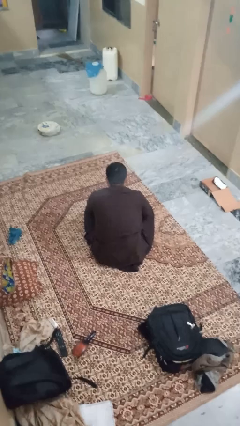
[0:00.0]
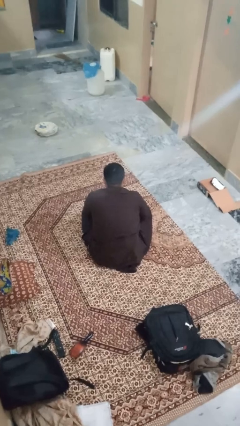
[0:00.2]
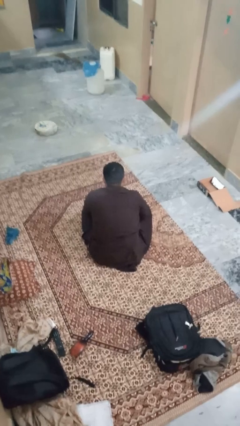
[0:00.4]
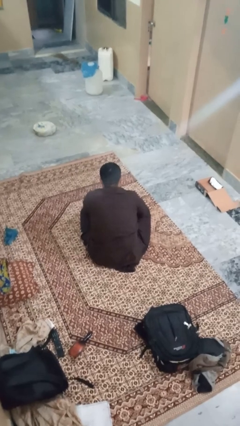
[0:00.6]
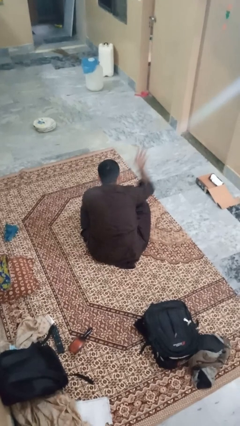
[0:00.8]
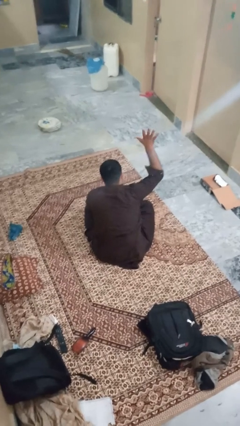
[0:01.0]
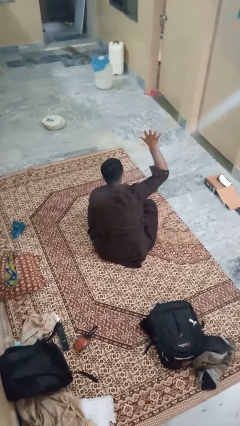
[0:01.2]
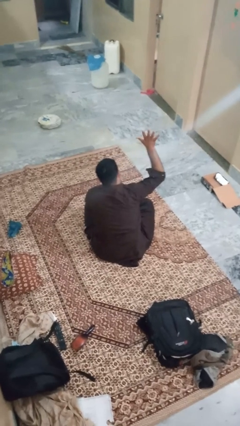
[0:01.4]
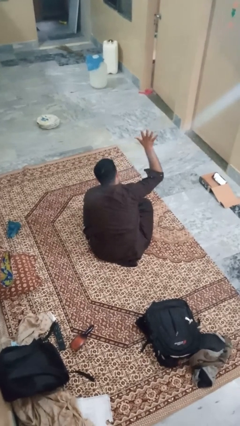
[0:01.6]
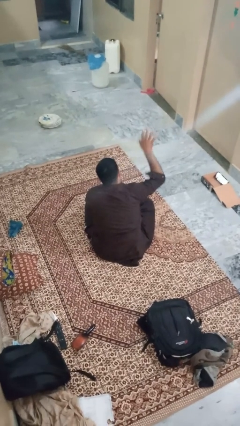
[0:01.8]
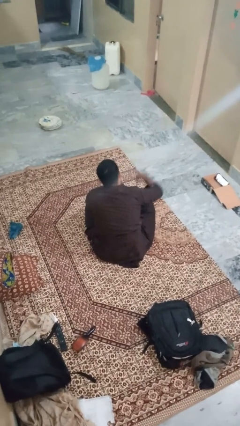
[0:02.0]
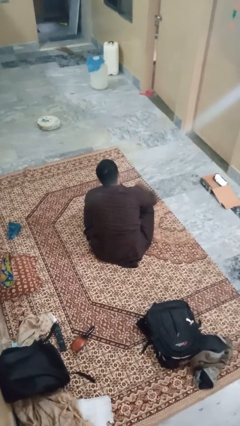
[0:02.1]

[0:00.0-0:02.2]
person gestures number five

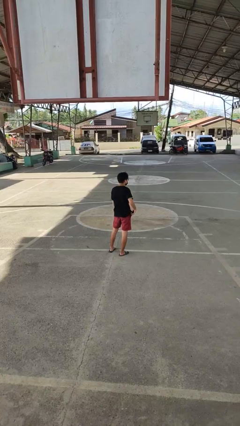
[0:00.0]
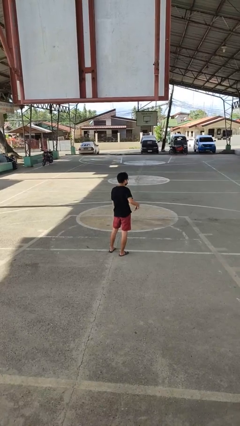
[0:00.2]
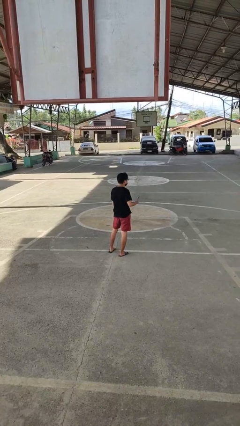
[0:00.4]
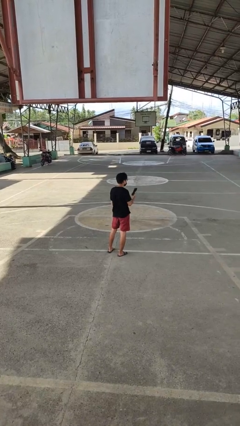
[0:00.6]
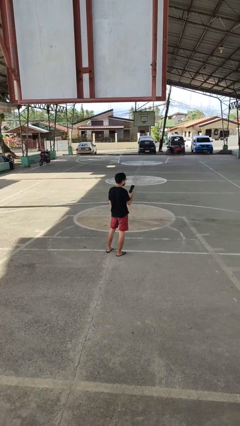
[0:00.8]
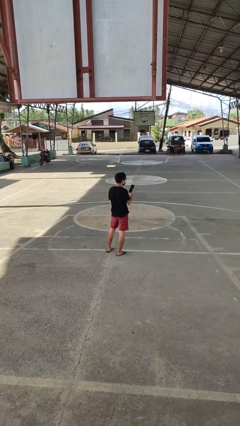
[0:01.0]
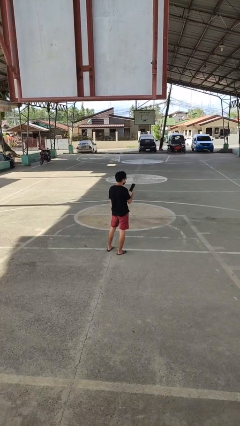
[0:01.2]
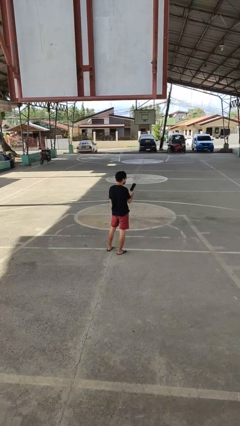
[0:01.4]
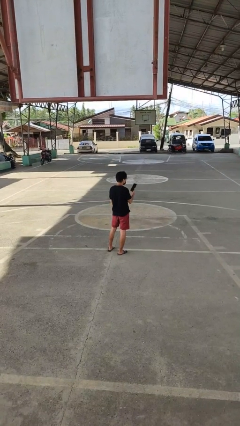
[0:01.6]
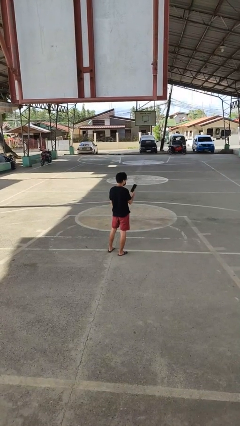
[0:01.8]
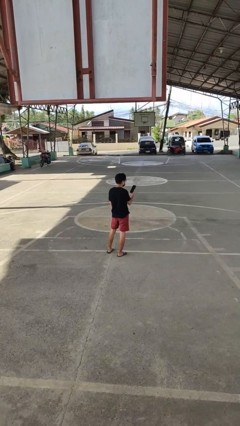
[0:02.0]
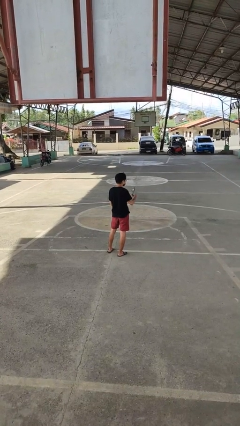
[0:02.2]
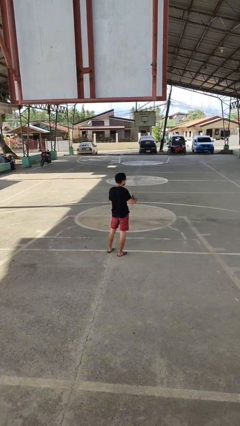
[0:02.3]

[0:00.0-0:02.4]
person takes phone from pocket

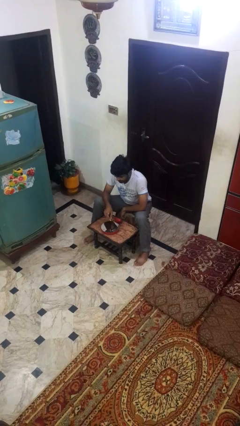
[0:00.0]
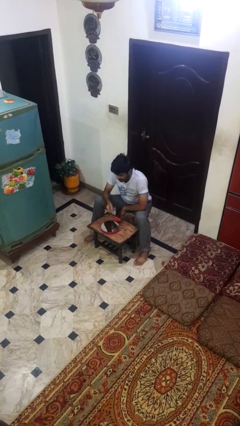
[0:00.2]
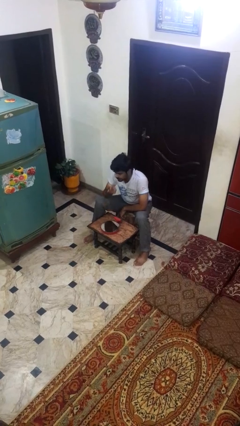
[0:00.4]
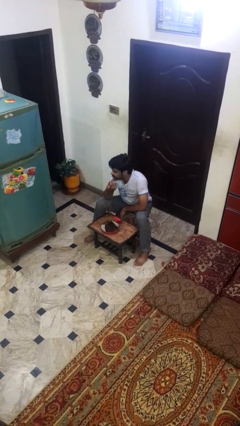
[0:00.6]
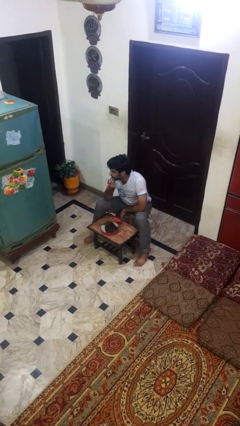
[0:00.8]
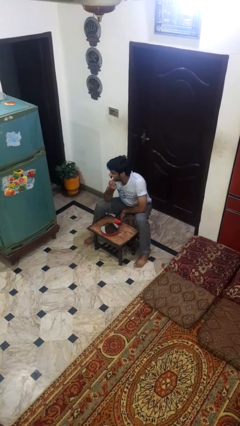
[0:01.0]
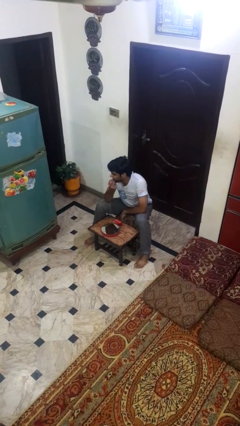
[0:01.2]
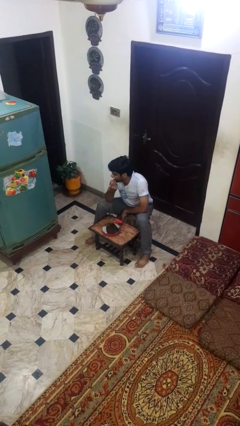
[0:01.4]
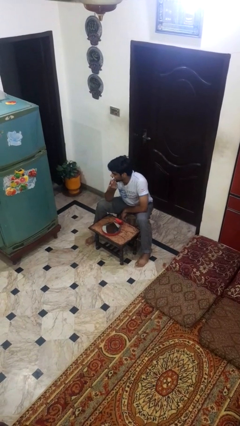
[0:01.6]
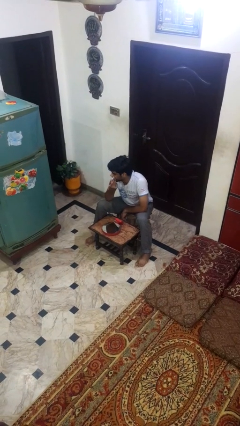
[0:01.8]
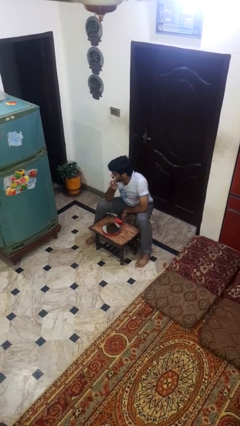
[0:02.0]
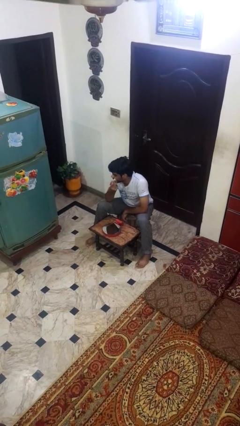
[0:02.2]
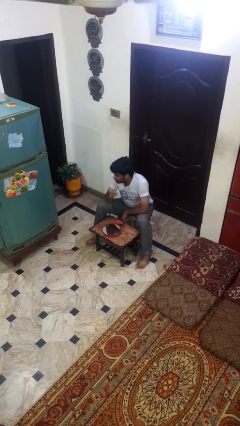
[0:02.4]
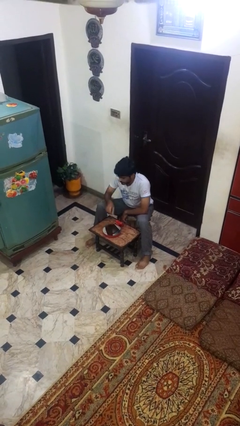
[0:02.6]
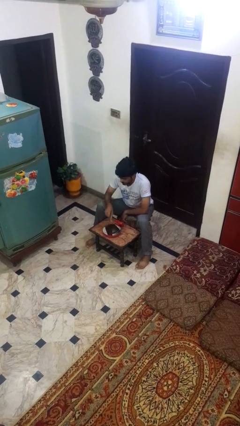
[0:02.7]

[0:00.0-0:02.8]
person applies eye makeup

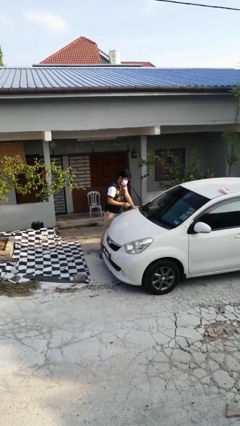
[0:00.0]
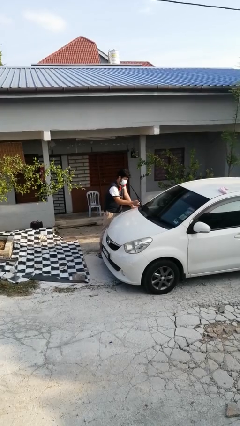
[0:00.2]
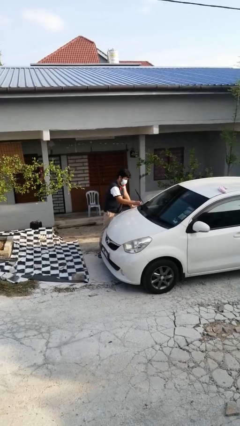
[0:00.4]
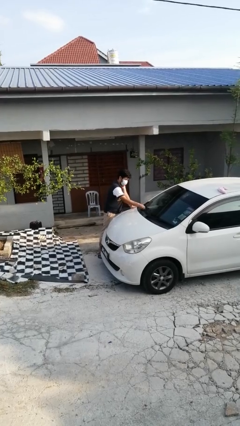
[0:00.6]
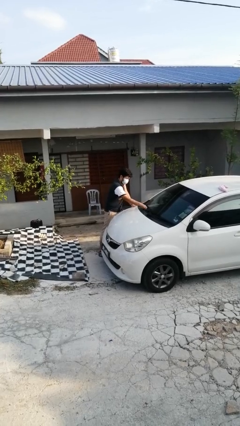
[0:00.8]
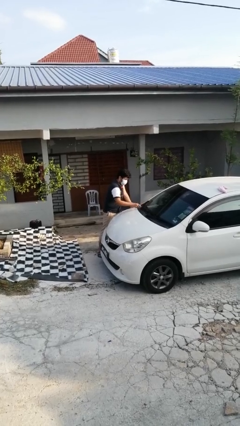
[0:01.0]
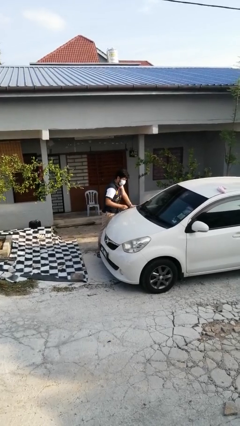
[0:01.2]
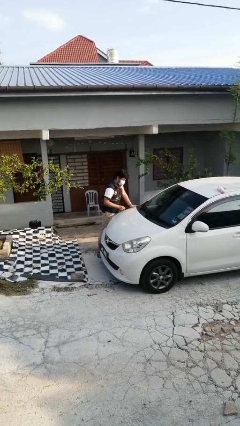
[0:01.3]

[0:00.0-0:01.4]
person flips down car wipers

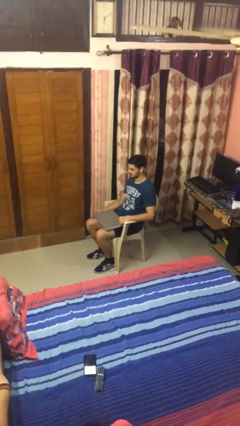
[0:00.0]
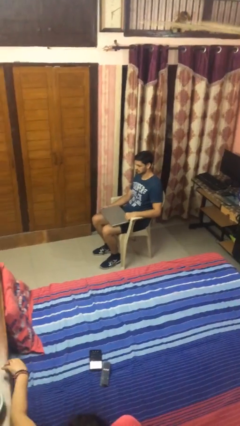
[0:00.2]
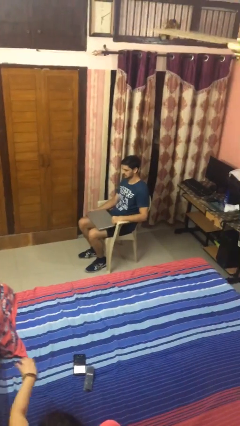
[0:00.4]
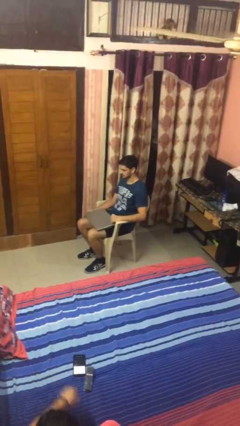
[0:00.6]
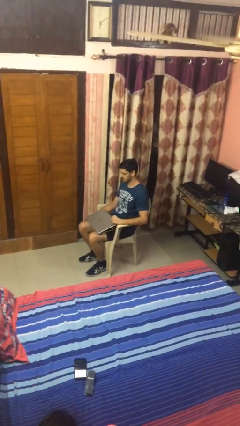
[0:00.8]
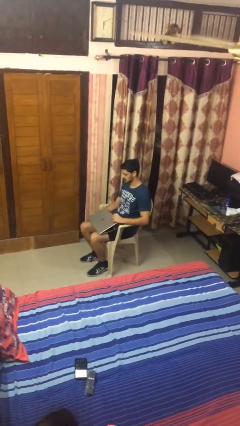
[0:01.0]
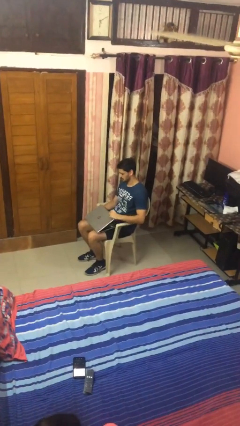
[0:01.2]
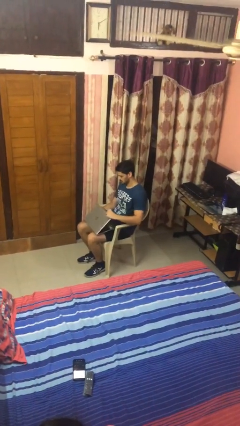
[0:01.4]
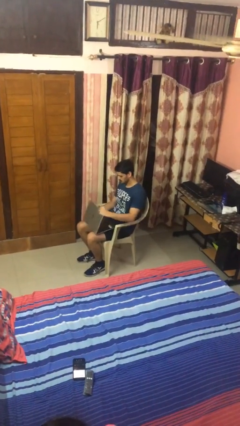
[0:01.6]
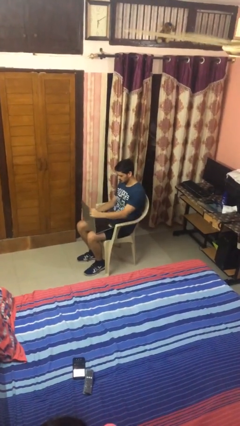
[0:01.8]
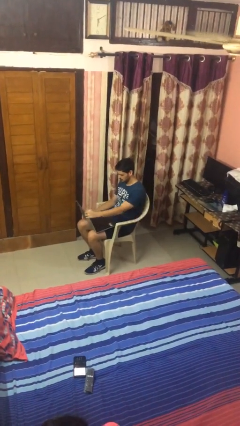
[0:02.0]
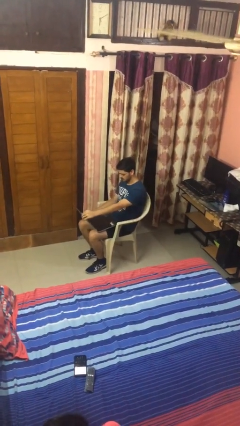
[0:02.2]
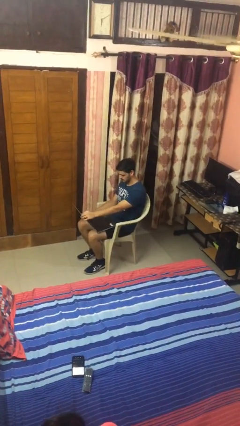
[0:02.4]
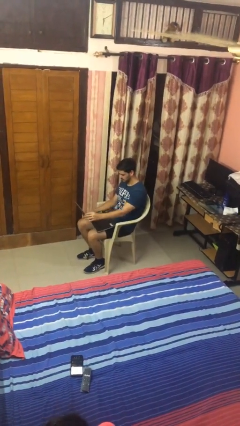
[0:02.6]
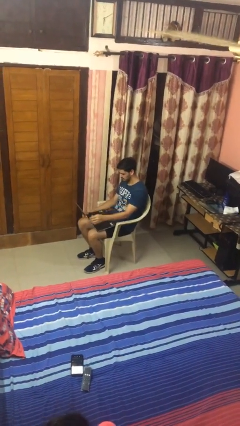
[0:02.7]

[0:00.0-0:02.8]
person opens laptop

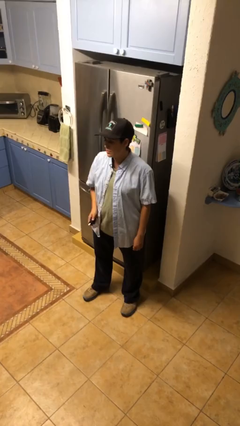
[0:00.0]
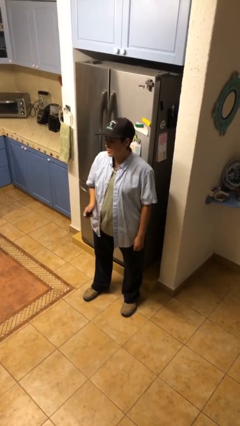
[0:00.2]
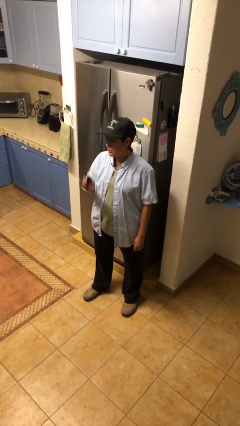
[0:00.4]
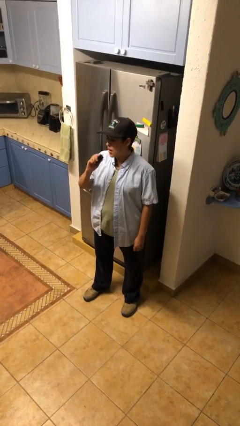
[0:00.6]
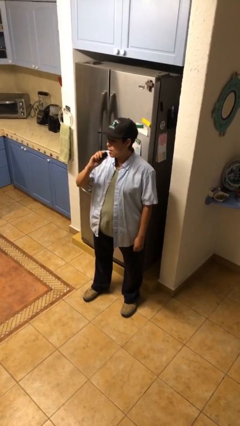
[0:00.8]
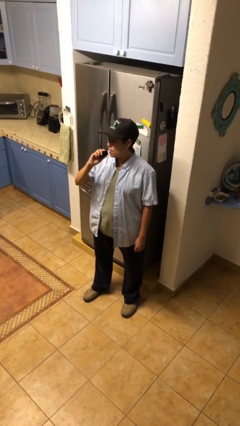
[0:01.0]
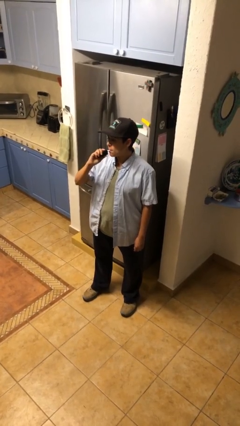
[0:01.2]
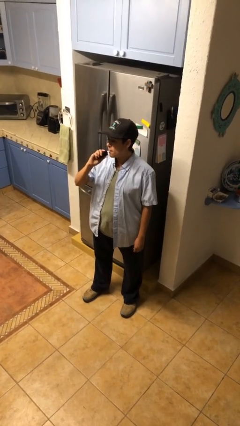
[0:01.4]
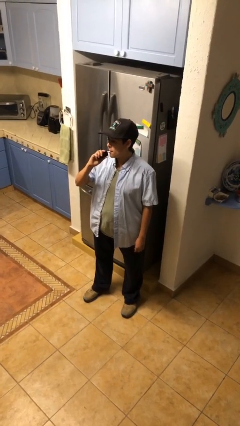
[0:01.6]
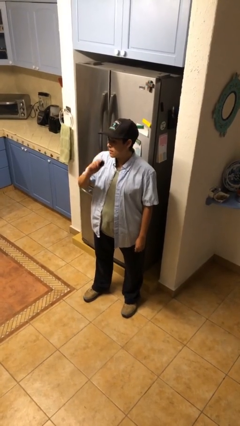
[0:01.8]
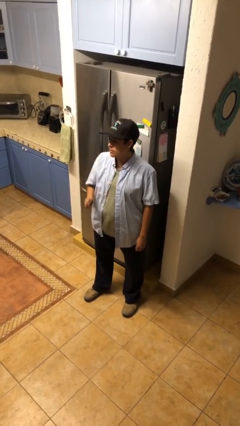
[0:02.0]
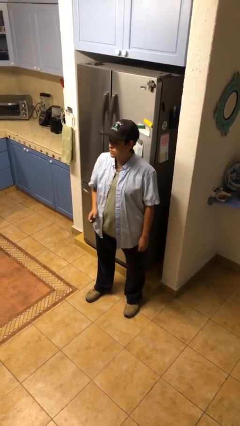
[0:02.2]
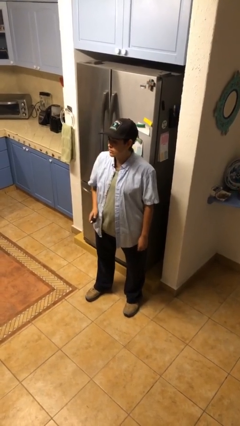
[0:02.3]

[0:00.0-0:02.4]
person vapes

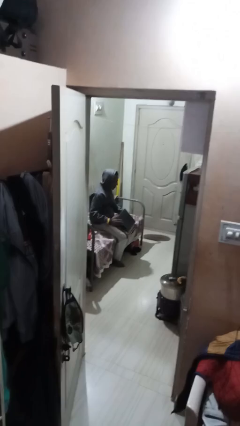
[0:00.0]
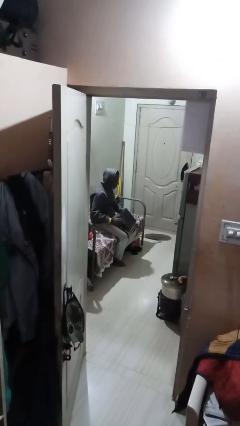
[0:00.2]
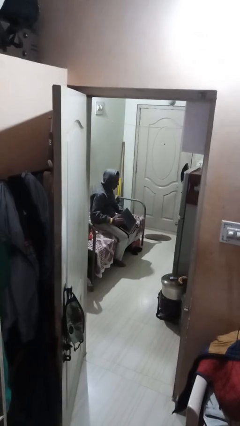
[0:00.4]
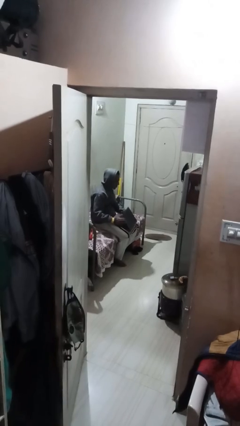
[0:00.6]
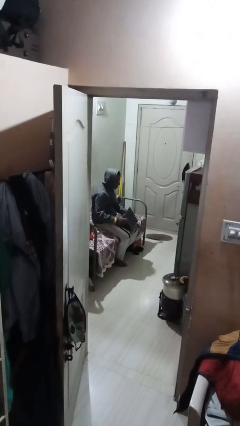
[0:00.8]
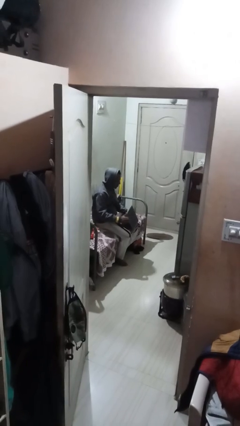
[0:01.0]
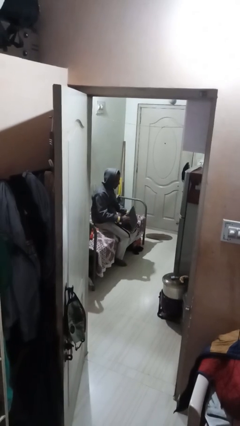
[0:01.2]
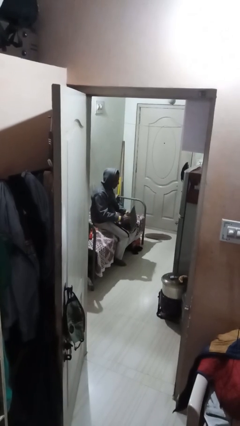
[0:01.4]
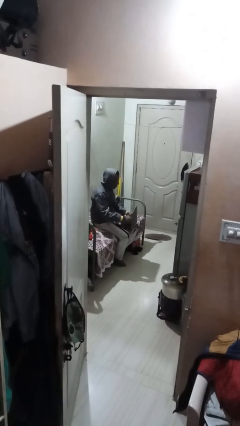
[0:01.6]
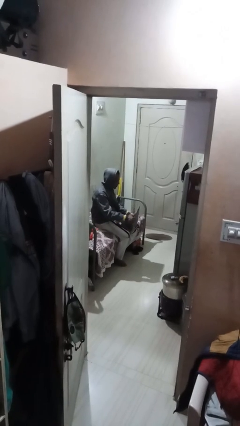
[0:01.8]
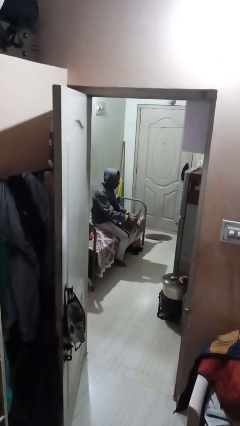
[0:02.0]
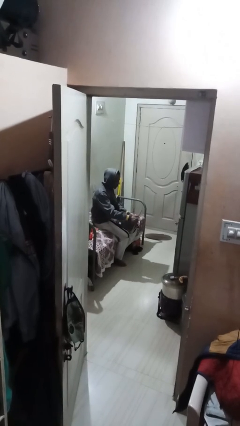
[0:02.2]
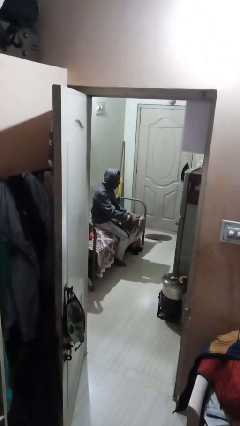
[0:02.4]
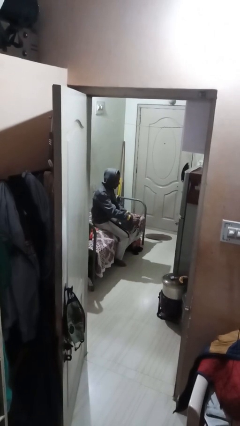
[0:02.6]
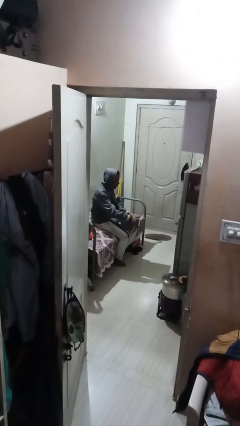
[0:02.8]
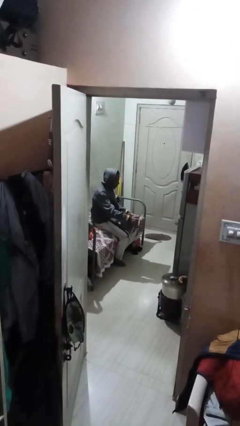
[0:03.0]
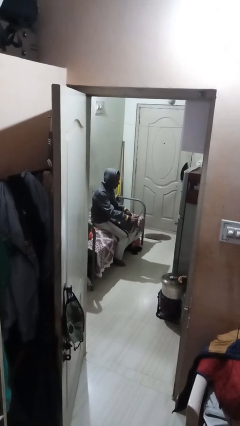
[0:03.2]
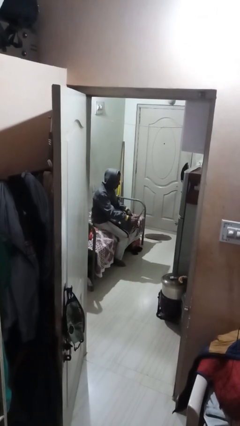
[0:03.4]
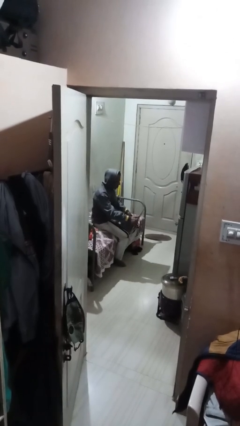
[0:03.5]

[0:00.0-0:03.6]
person interacts with laptop
